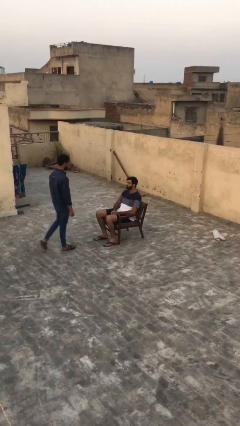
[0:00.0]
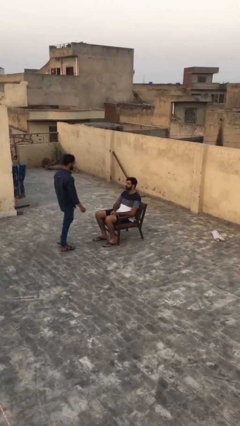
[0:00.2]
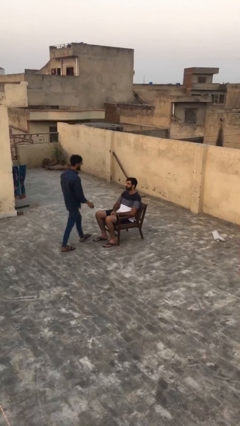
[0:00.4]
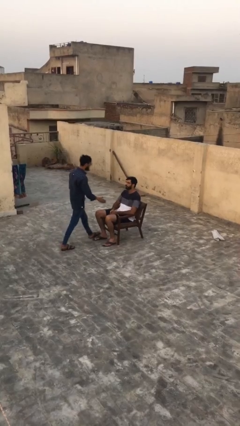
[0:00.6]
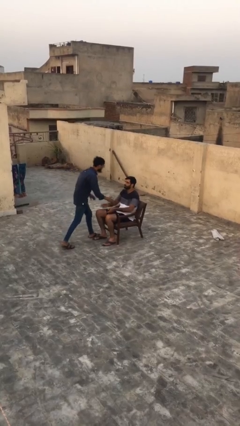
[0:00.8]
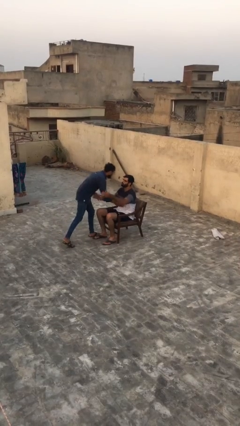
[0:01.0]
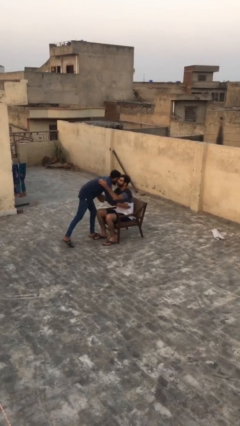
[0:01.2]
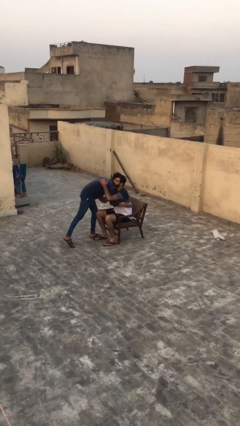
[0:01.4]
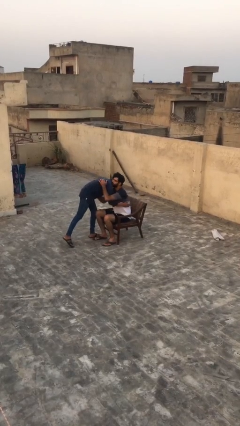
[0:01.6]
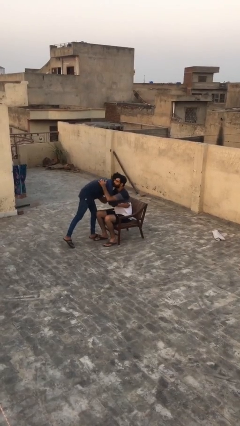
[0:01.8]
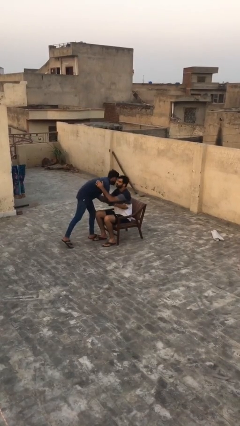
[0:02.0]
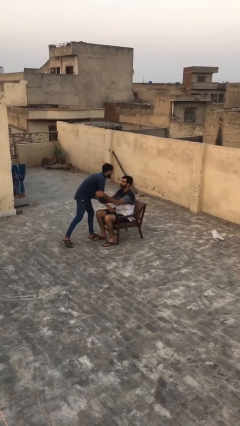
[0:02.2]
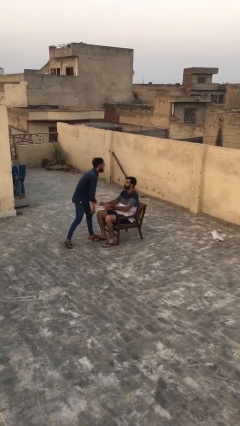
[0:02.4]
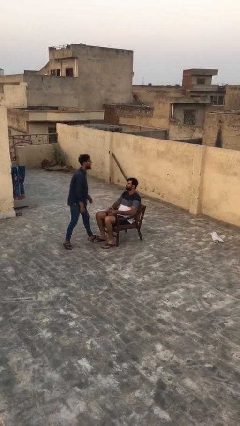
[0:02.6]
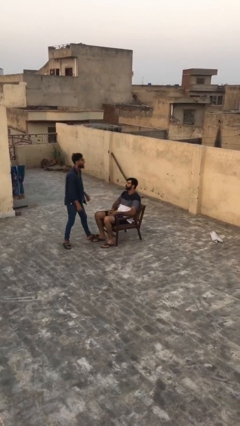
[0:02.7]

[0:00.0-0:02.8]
person embraces person

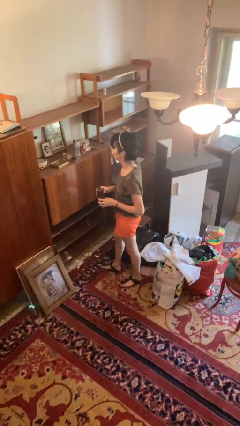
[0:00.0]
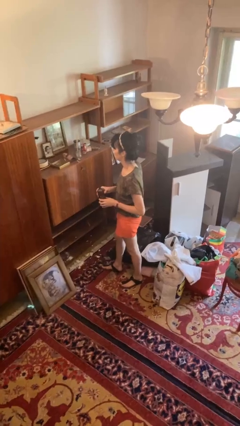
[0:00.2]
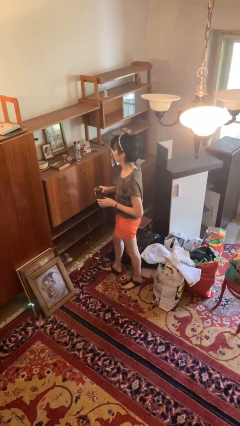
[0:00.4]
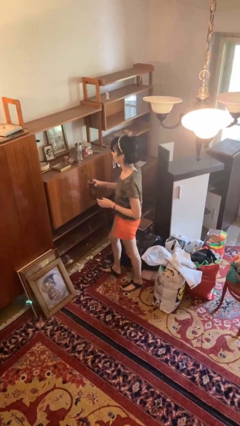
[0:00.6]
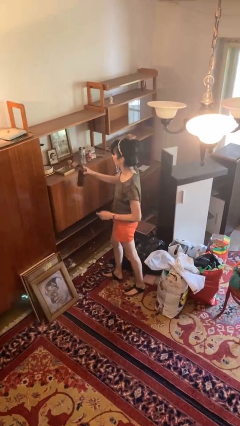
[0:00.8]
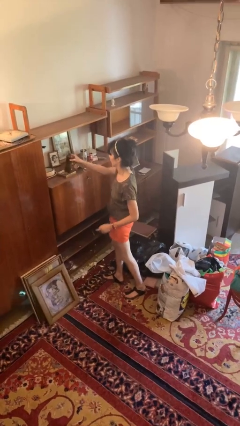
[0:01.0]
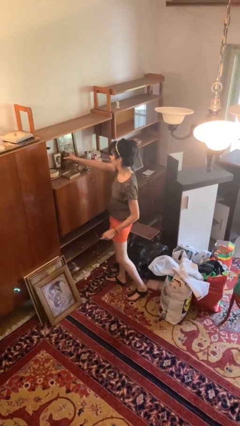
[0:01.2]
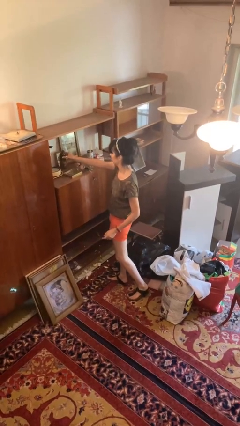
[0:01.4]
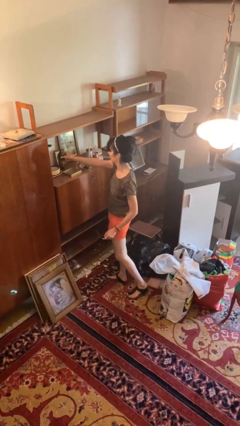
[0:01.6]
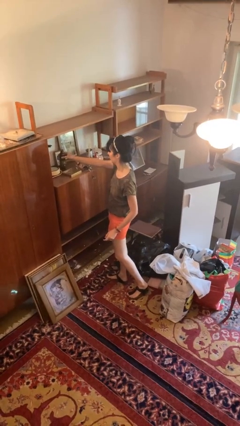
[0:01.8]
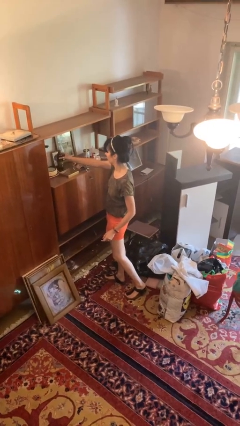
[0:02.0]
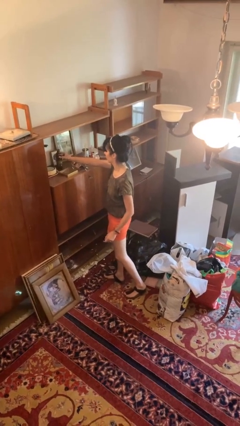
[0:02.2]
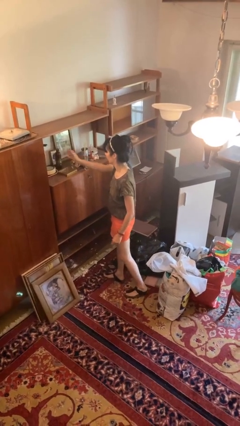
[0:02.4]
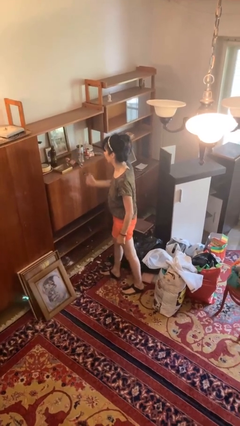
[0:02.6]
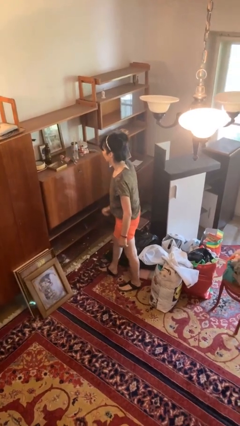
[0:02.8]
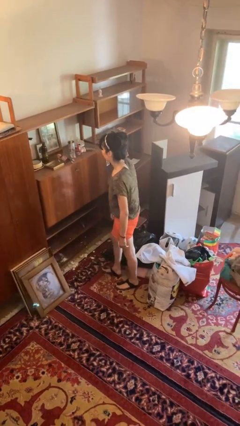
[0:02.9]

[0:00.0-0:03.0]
person puts down object on countertop

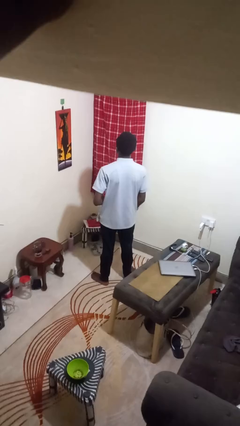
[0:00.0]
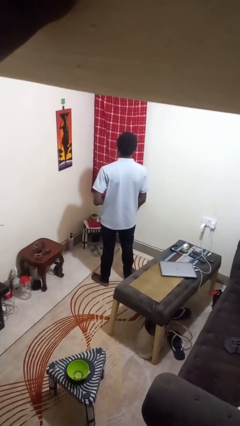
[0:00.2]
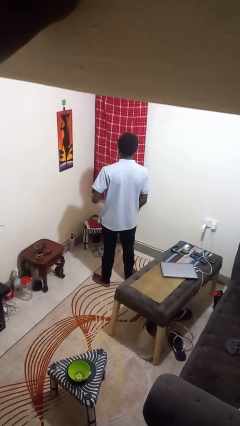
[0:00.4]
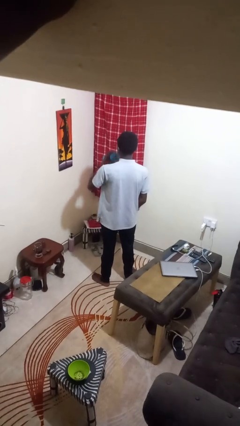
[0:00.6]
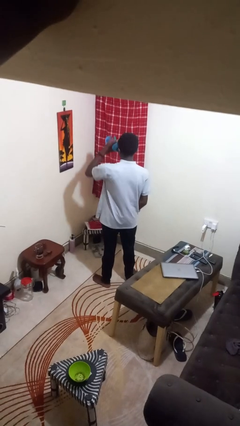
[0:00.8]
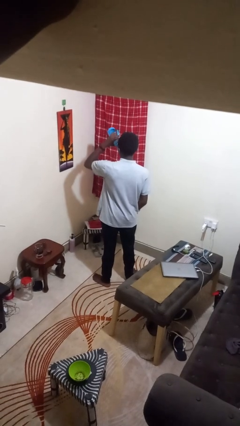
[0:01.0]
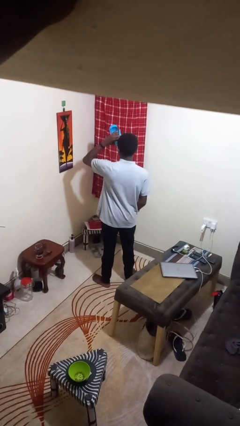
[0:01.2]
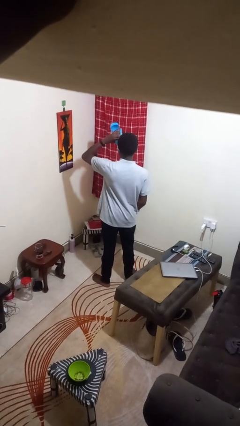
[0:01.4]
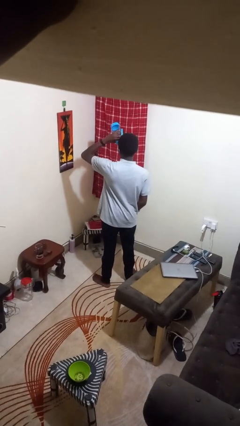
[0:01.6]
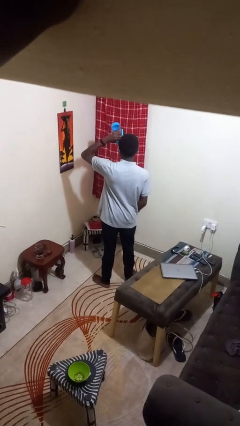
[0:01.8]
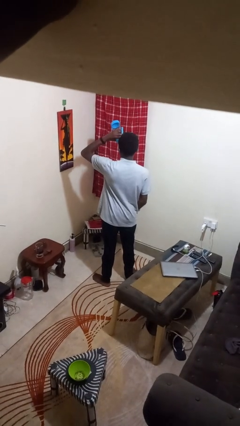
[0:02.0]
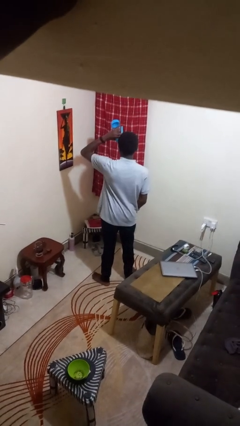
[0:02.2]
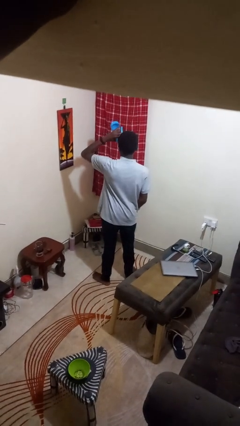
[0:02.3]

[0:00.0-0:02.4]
person drinks from bottle

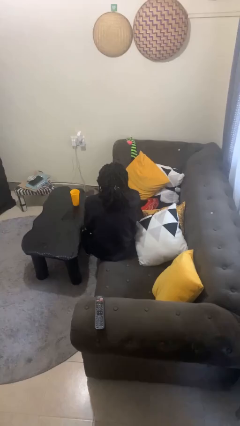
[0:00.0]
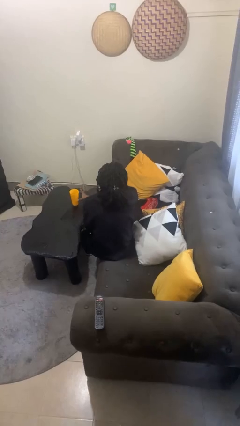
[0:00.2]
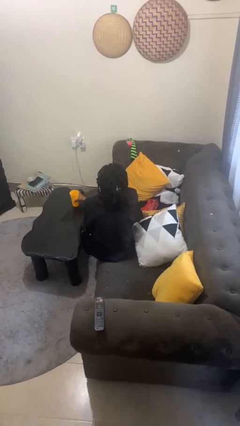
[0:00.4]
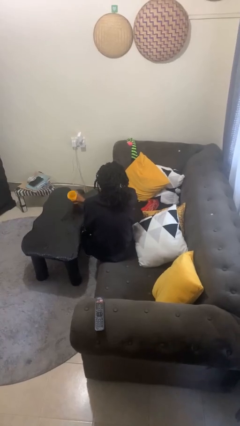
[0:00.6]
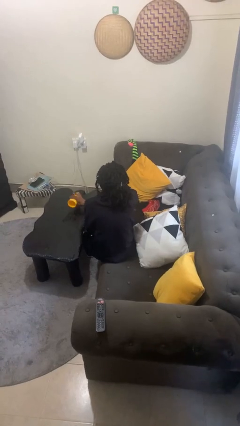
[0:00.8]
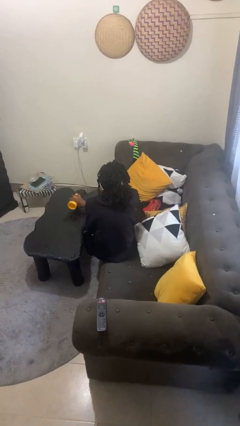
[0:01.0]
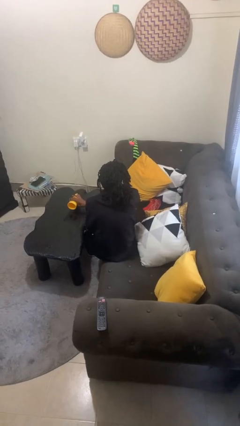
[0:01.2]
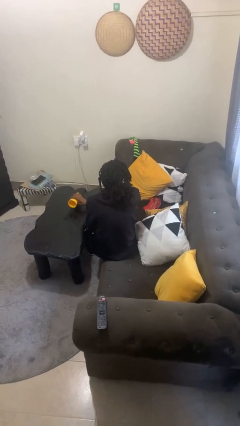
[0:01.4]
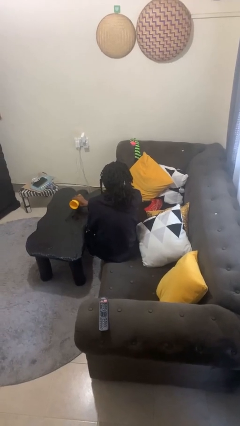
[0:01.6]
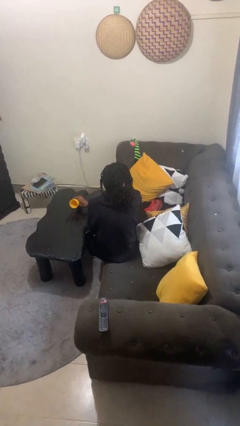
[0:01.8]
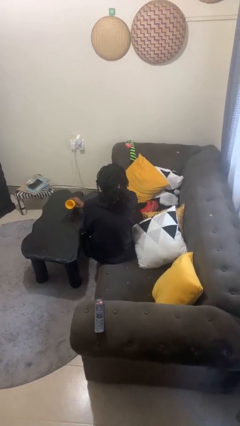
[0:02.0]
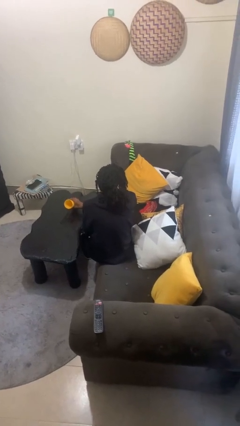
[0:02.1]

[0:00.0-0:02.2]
person spills on table

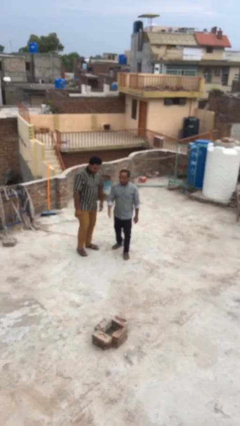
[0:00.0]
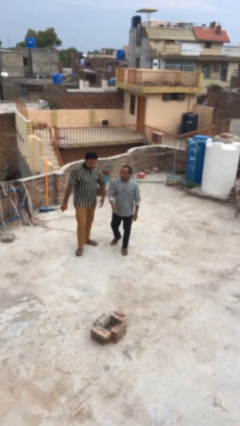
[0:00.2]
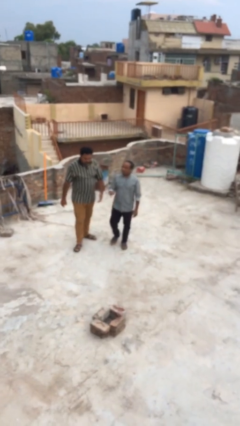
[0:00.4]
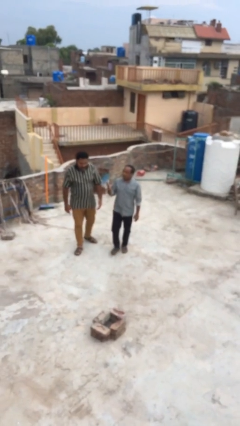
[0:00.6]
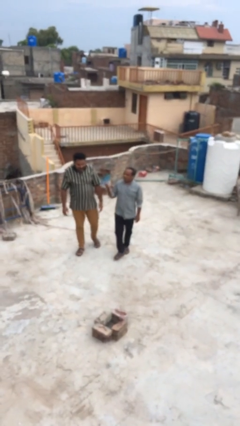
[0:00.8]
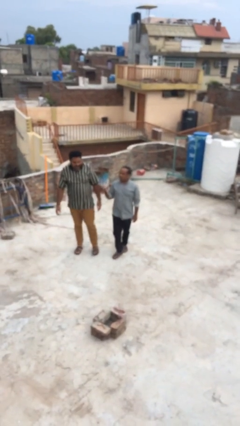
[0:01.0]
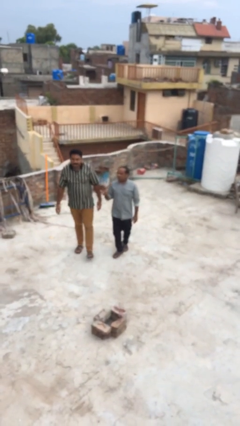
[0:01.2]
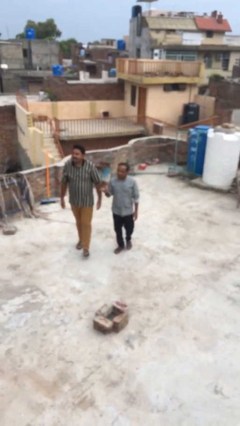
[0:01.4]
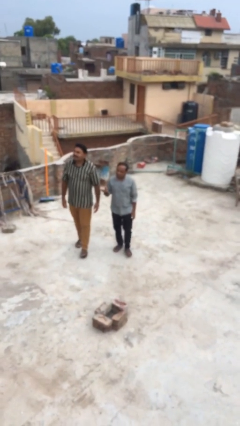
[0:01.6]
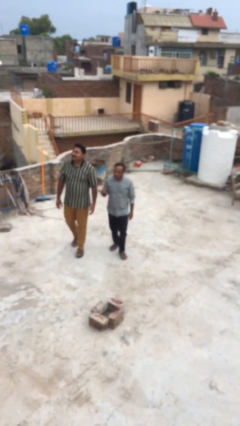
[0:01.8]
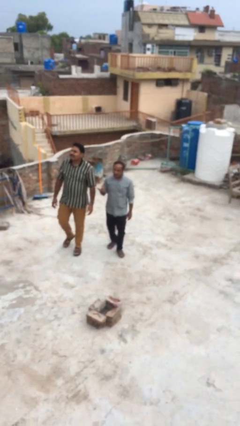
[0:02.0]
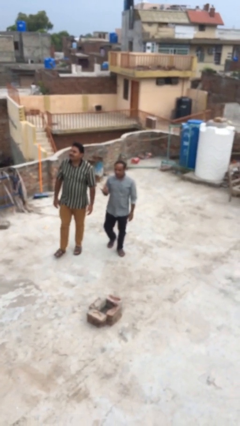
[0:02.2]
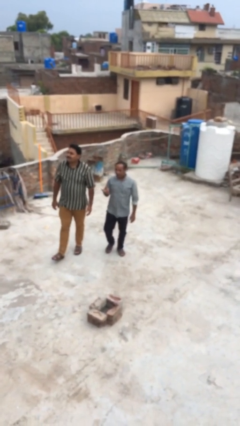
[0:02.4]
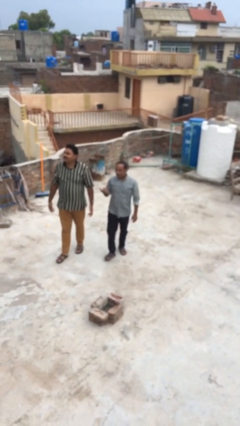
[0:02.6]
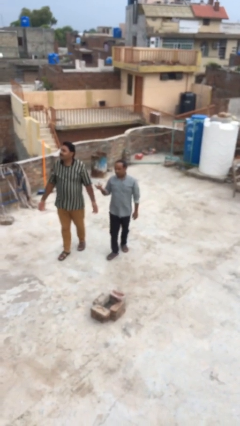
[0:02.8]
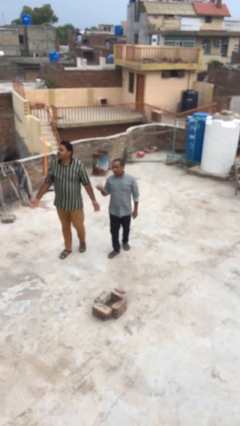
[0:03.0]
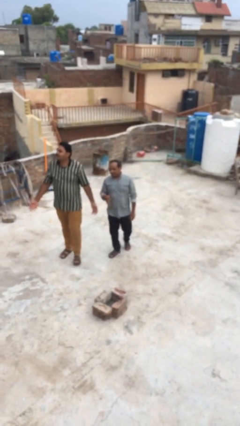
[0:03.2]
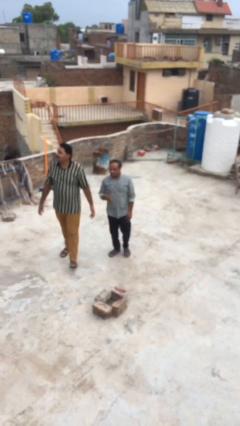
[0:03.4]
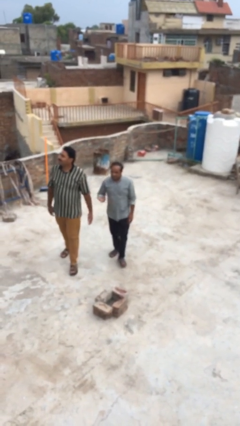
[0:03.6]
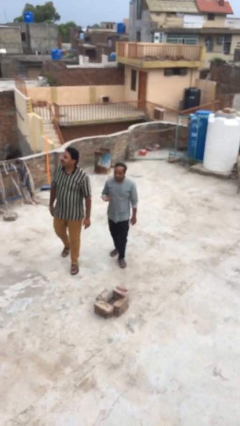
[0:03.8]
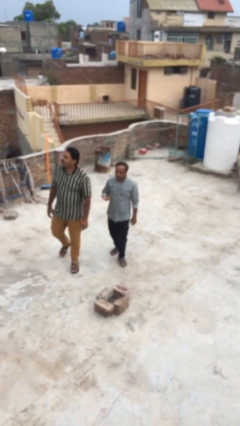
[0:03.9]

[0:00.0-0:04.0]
person talks to person

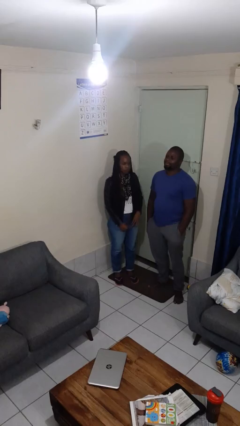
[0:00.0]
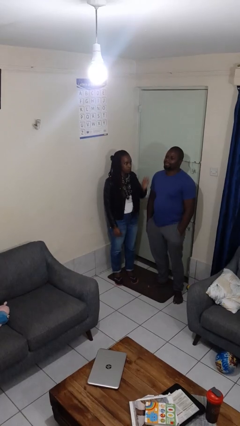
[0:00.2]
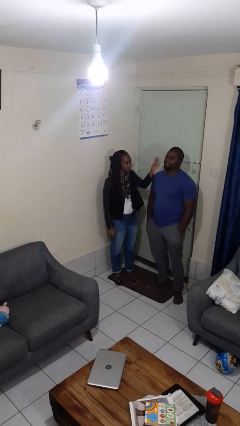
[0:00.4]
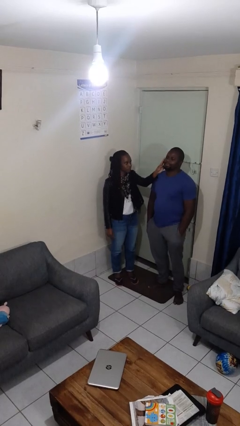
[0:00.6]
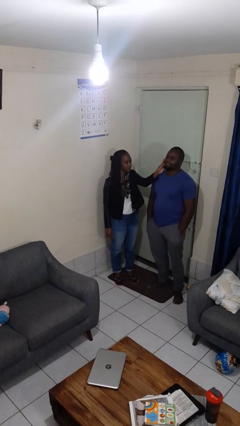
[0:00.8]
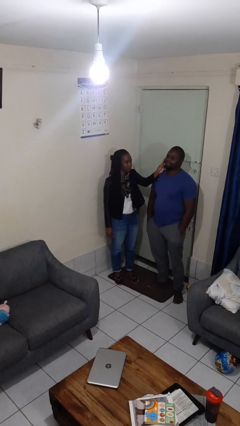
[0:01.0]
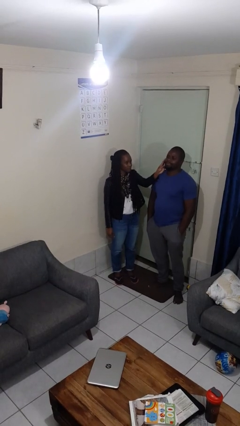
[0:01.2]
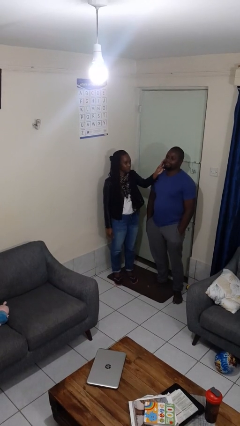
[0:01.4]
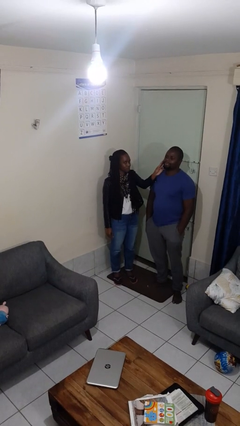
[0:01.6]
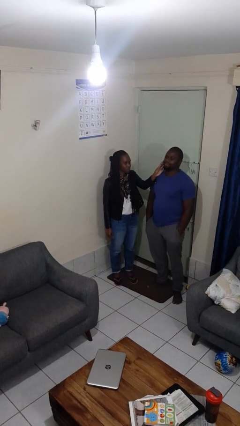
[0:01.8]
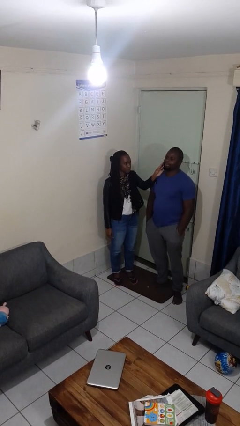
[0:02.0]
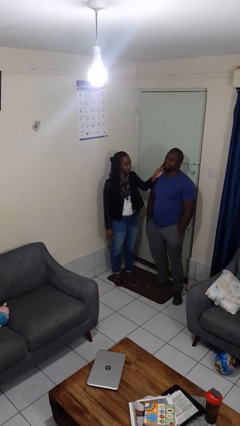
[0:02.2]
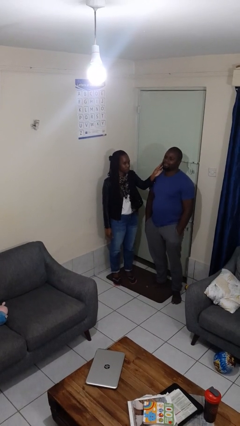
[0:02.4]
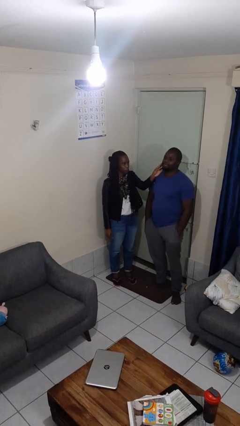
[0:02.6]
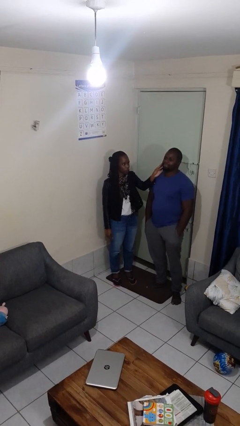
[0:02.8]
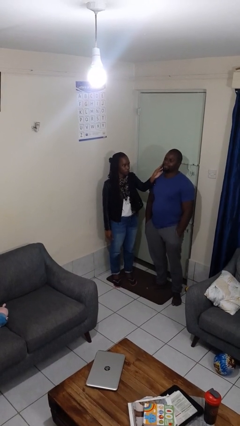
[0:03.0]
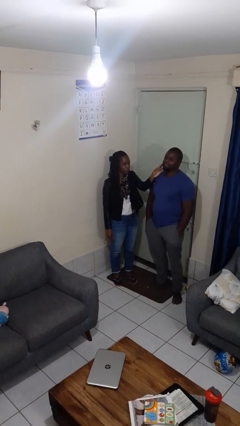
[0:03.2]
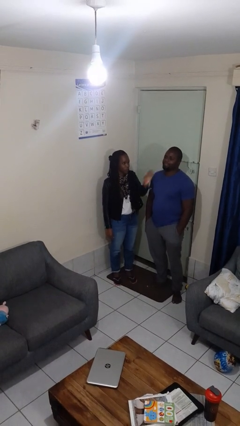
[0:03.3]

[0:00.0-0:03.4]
person touches face of person
